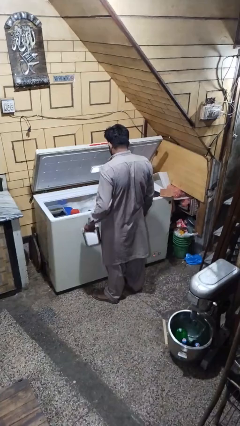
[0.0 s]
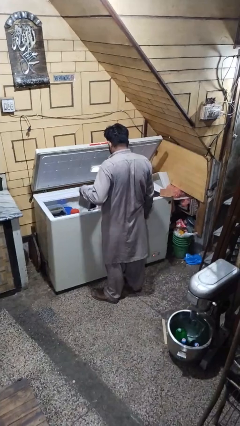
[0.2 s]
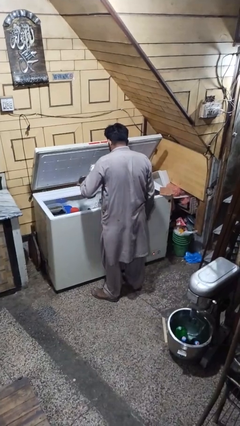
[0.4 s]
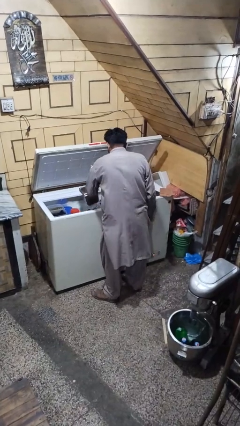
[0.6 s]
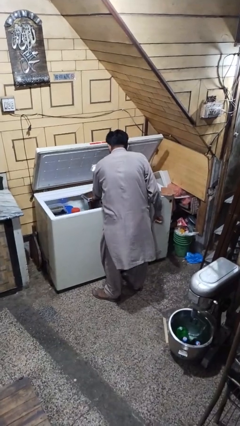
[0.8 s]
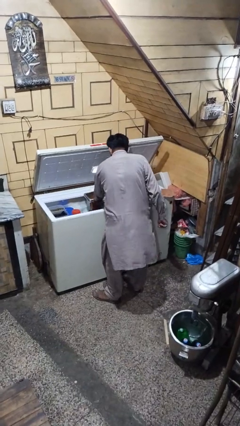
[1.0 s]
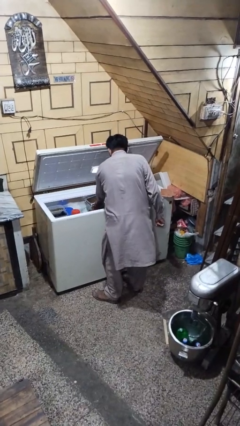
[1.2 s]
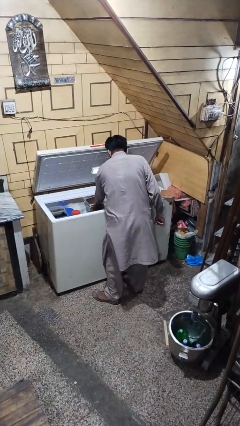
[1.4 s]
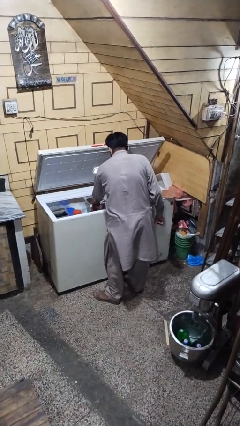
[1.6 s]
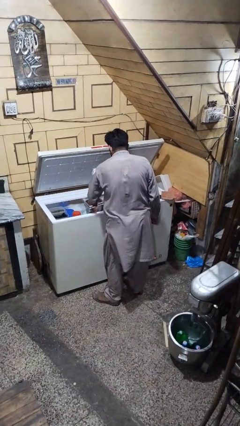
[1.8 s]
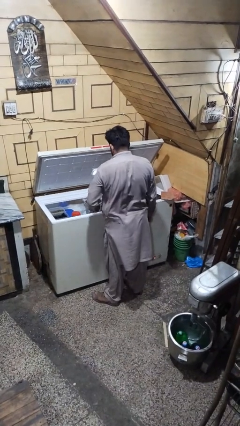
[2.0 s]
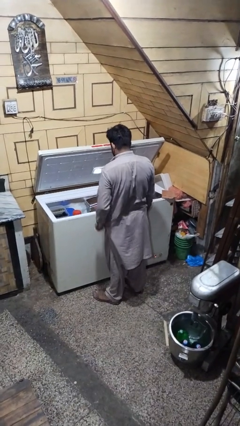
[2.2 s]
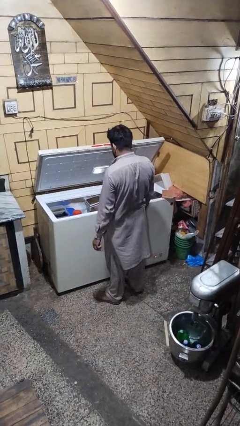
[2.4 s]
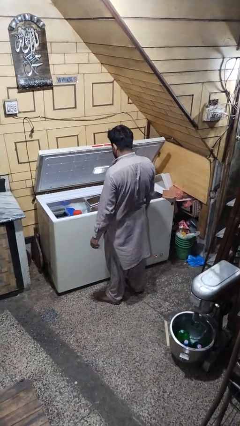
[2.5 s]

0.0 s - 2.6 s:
person puts object into refrigerator

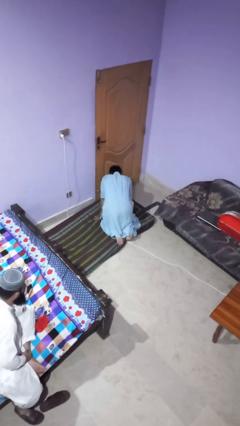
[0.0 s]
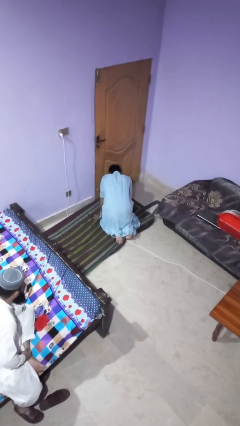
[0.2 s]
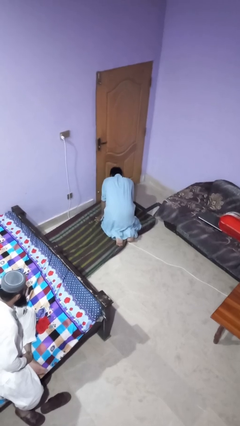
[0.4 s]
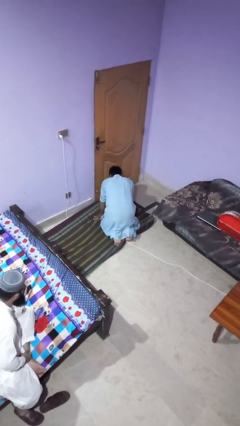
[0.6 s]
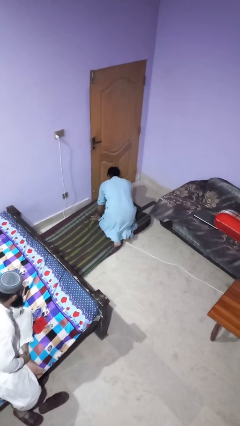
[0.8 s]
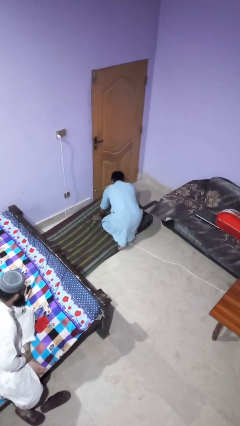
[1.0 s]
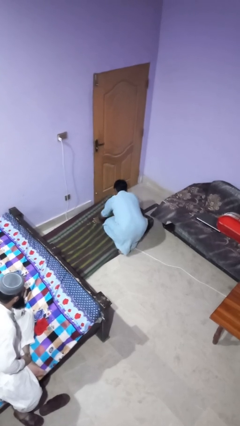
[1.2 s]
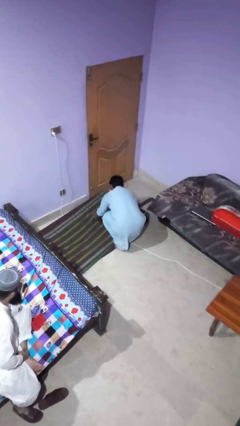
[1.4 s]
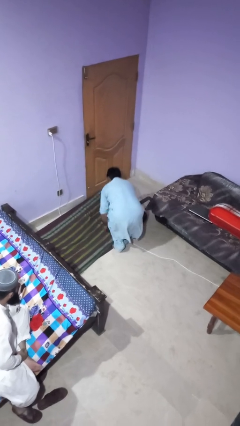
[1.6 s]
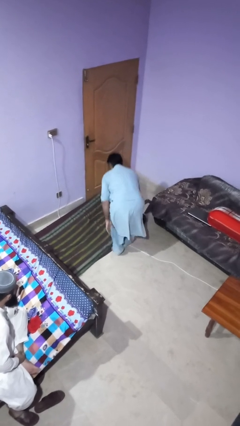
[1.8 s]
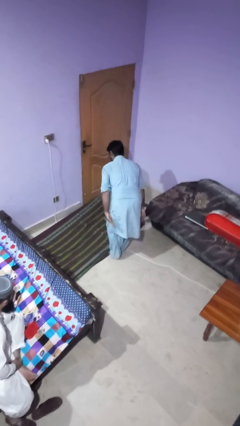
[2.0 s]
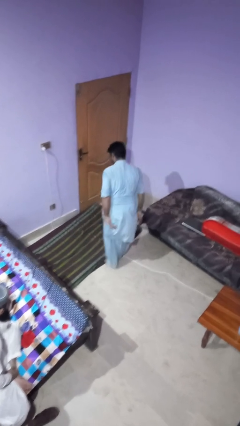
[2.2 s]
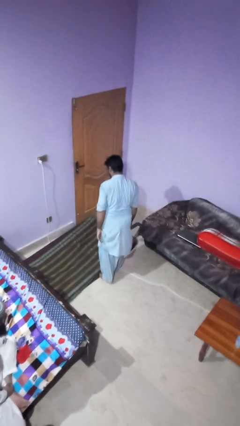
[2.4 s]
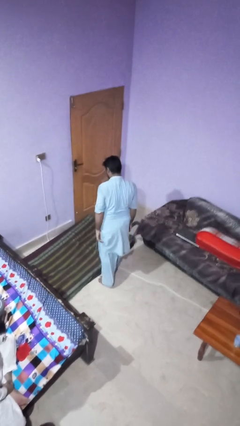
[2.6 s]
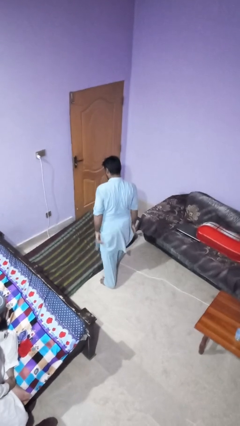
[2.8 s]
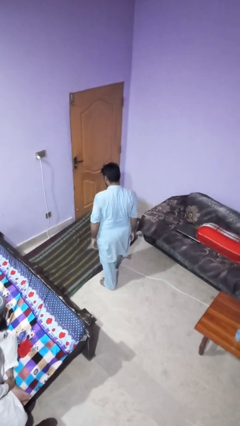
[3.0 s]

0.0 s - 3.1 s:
person stands up from floor

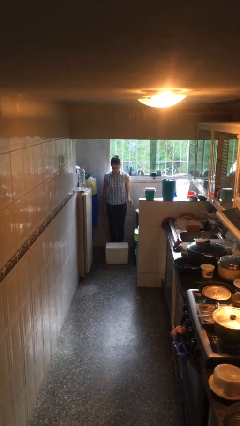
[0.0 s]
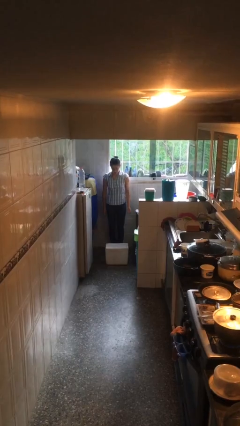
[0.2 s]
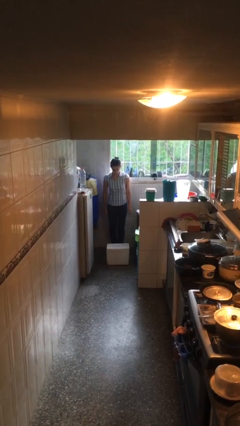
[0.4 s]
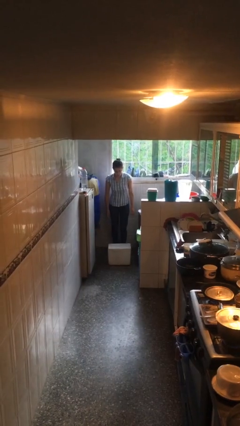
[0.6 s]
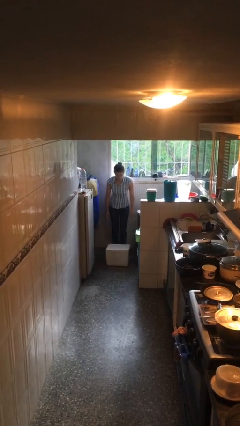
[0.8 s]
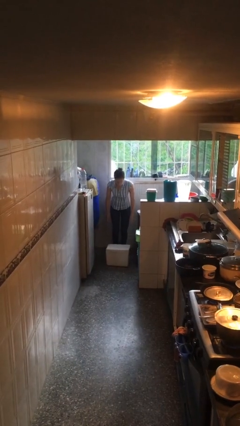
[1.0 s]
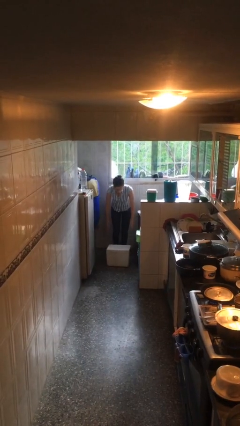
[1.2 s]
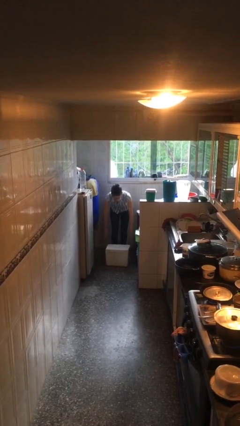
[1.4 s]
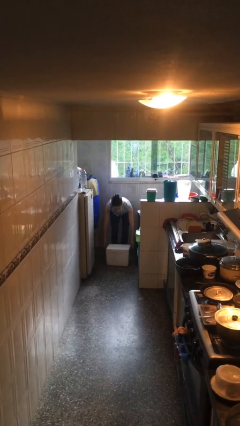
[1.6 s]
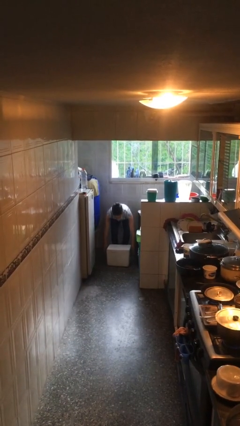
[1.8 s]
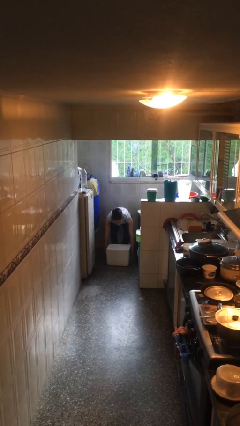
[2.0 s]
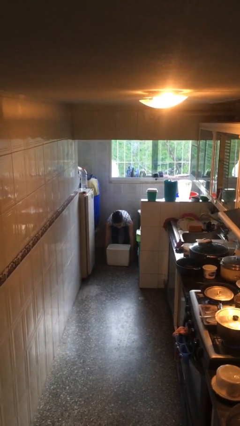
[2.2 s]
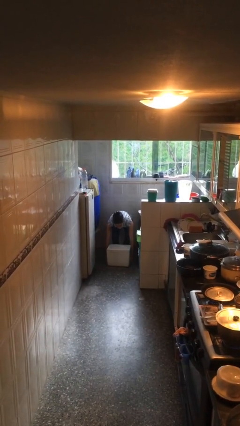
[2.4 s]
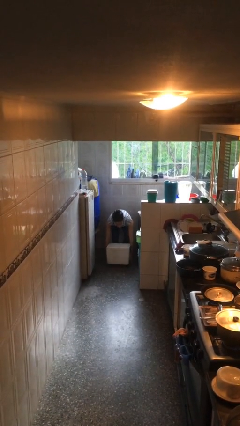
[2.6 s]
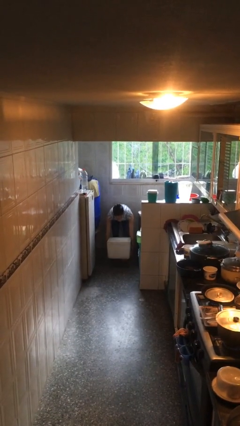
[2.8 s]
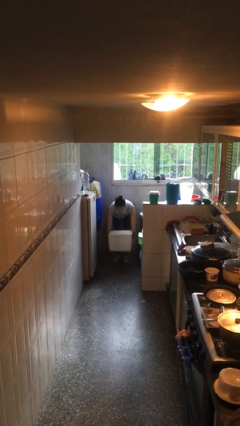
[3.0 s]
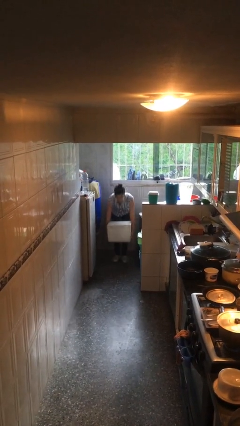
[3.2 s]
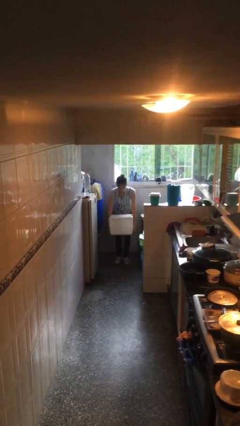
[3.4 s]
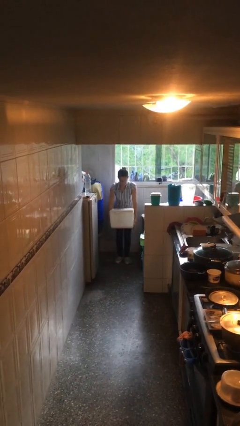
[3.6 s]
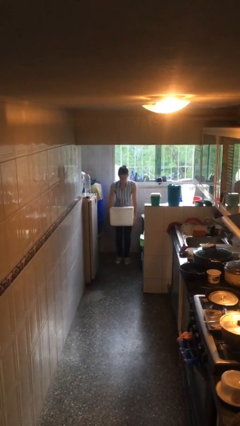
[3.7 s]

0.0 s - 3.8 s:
person picks up object from floor

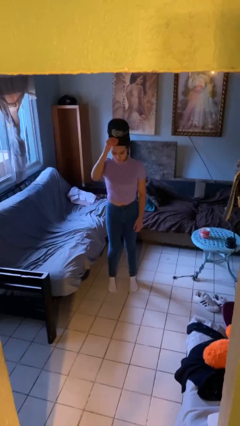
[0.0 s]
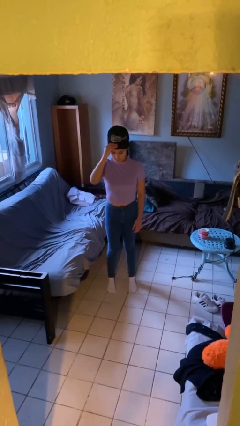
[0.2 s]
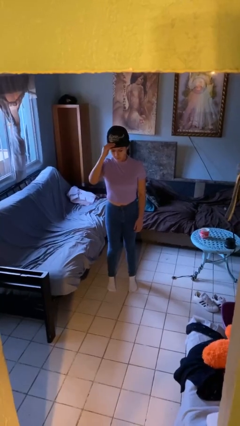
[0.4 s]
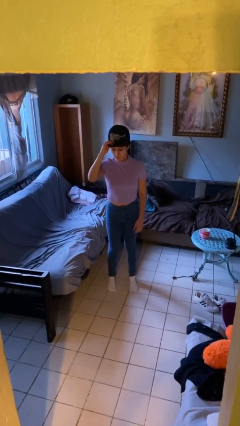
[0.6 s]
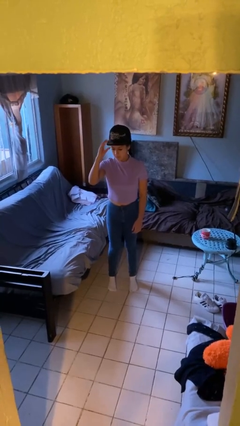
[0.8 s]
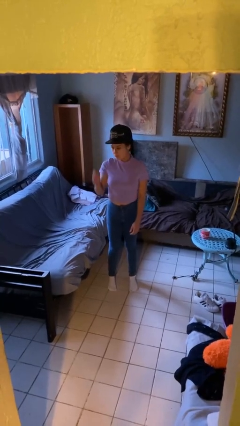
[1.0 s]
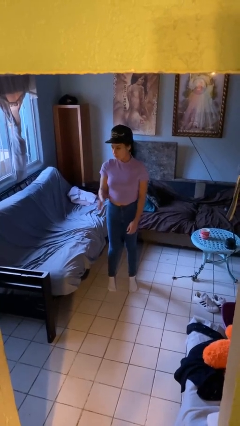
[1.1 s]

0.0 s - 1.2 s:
person puts on hat

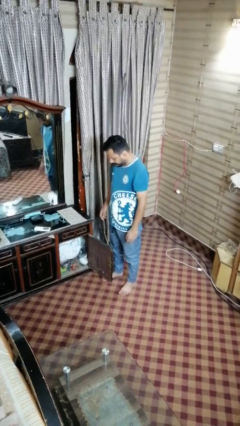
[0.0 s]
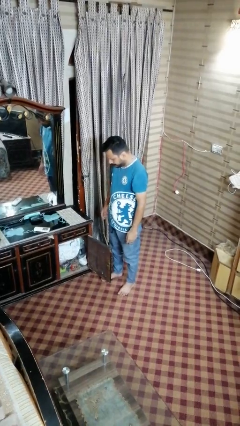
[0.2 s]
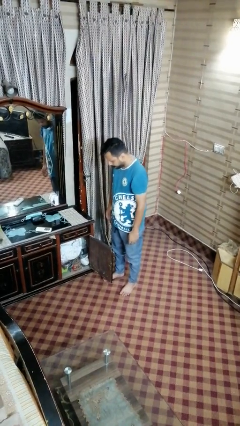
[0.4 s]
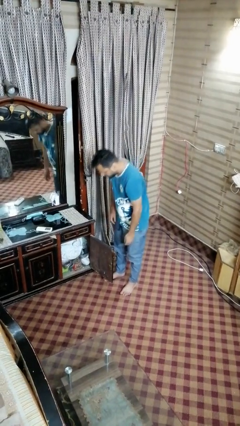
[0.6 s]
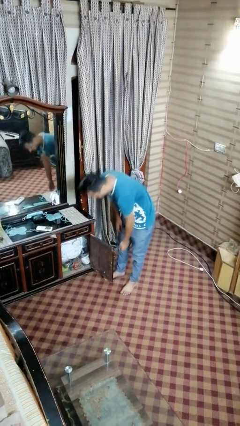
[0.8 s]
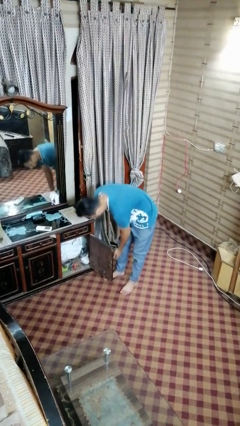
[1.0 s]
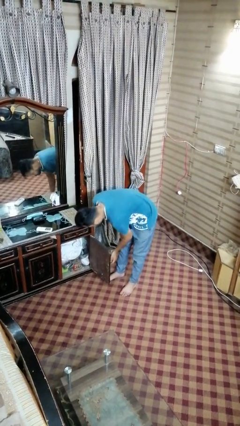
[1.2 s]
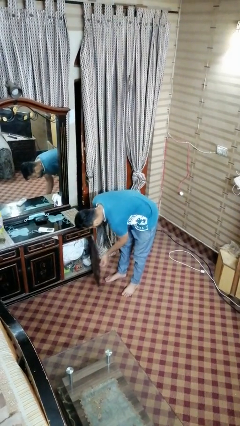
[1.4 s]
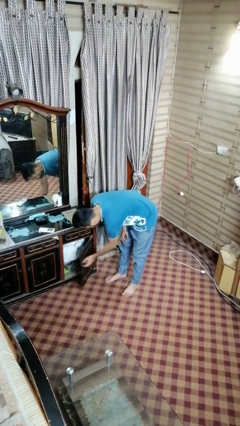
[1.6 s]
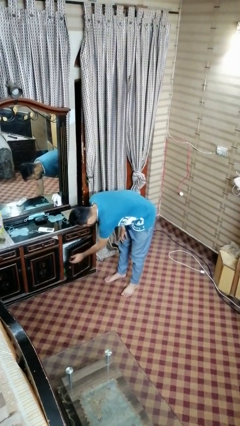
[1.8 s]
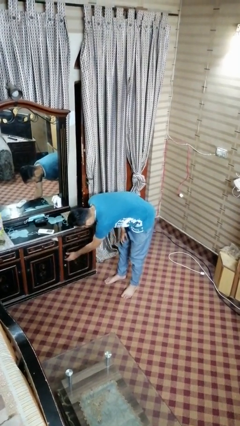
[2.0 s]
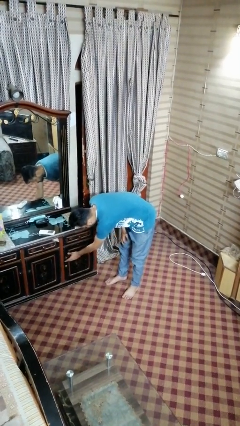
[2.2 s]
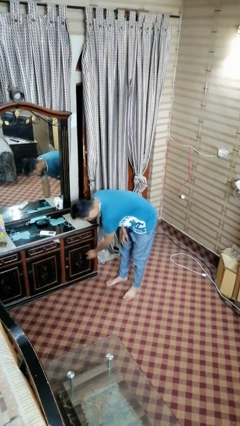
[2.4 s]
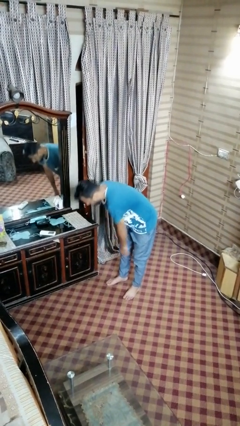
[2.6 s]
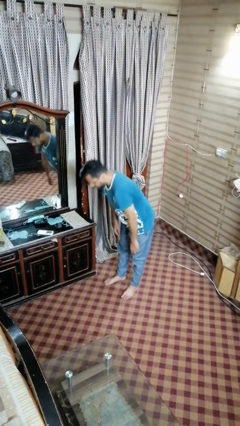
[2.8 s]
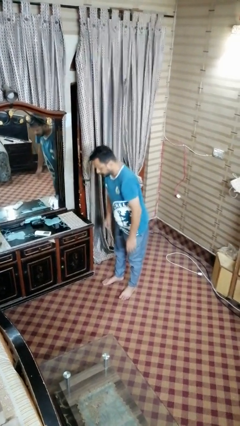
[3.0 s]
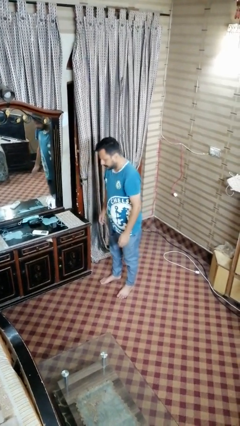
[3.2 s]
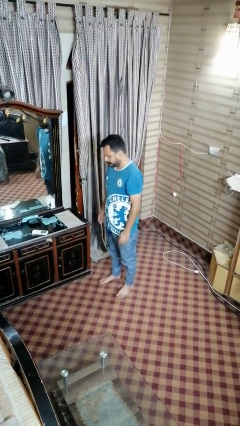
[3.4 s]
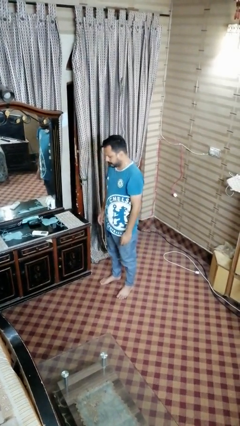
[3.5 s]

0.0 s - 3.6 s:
person closes dresser drawer

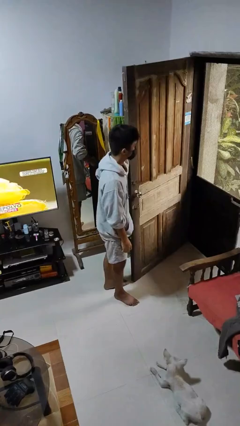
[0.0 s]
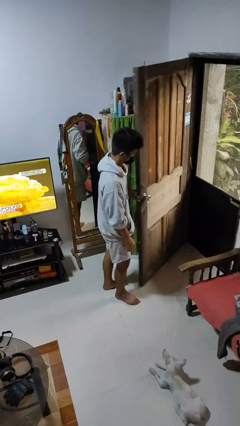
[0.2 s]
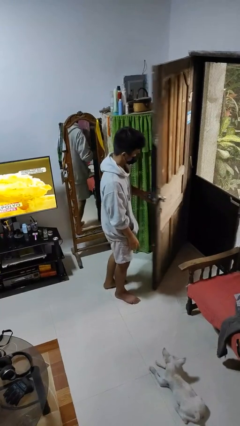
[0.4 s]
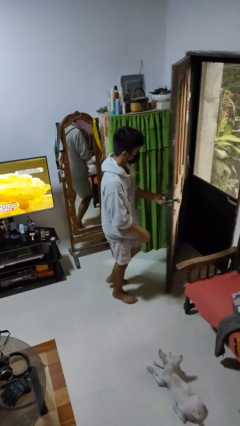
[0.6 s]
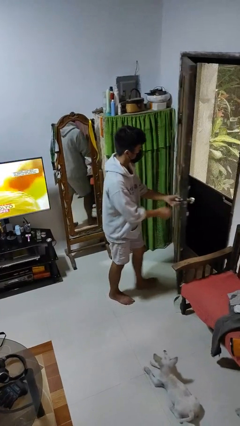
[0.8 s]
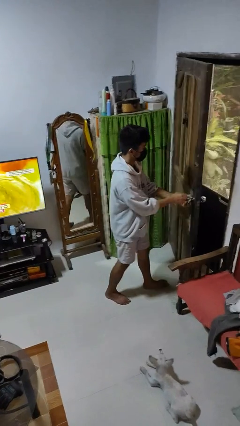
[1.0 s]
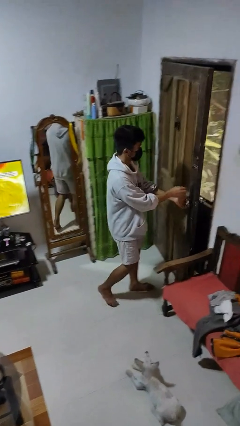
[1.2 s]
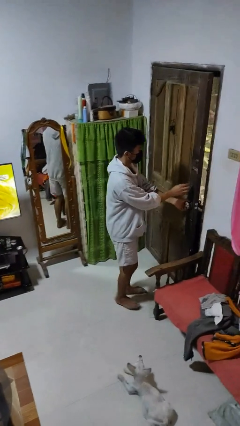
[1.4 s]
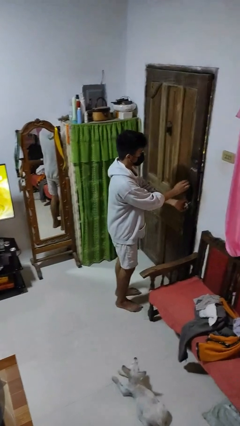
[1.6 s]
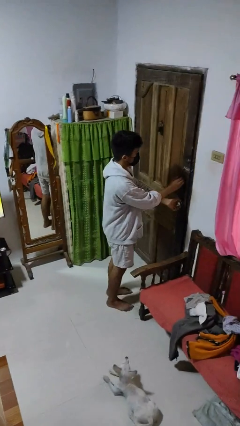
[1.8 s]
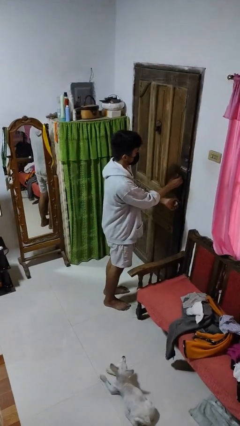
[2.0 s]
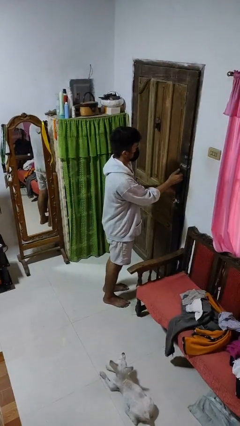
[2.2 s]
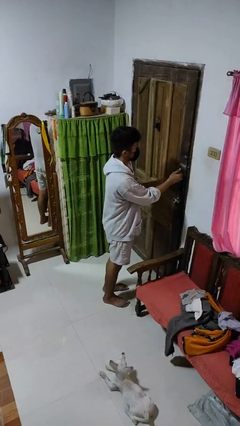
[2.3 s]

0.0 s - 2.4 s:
person closes facility door

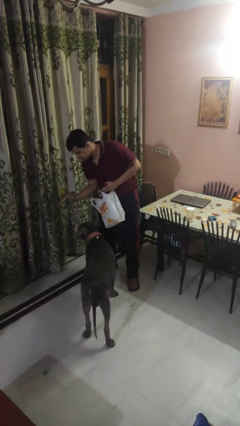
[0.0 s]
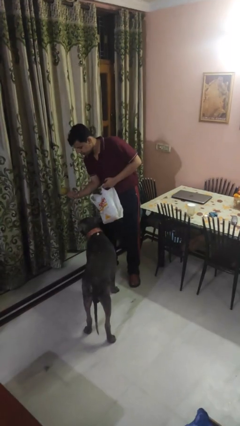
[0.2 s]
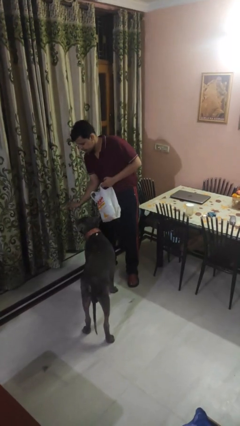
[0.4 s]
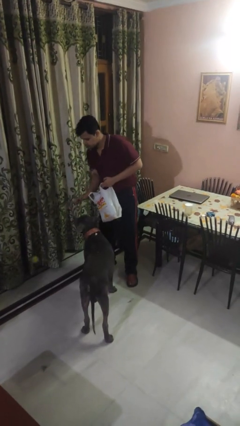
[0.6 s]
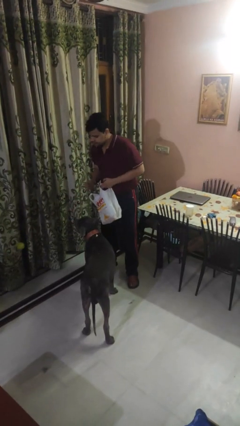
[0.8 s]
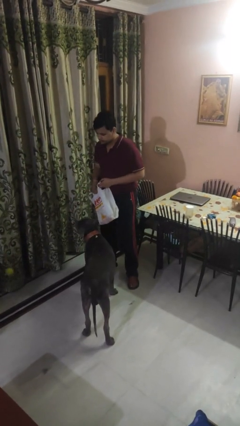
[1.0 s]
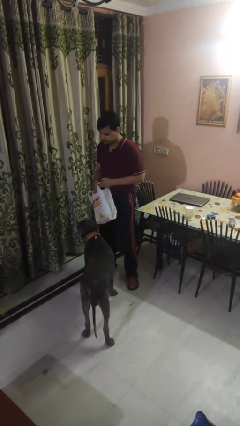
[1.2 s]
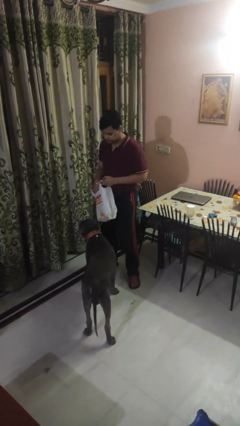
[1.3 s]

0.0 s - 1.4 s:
person throws object to dog
